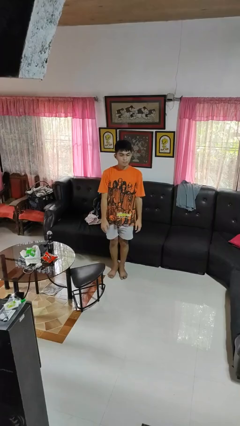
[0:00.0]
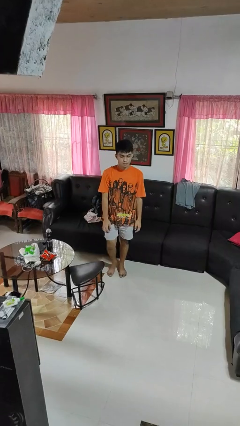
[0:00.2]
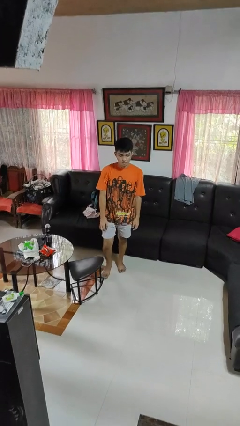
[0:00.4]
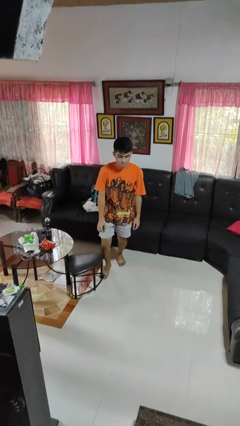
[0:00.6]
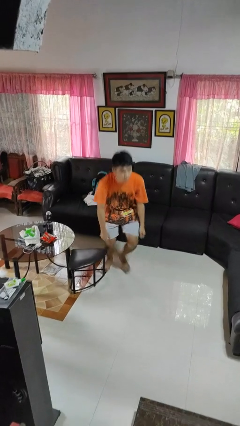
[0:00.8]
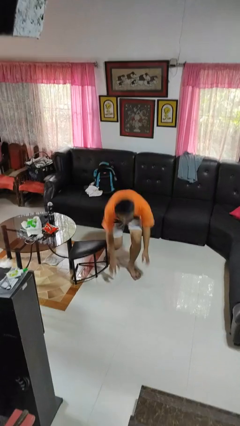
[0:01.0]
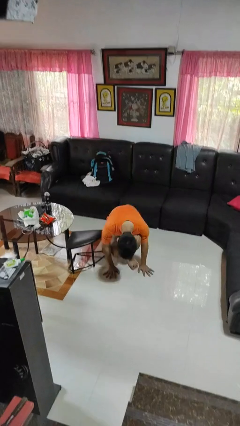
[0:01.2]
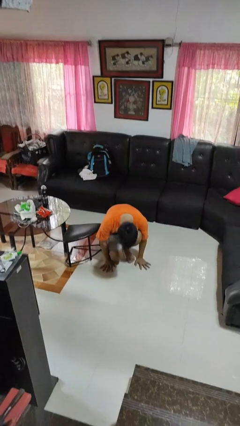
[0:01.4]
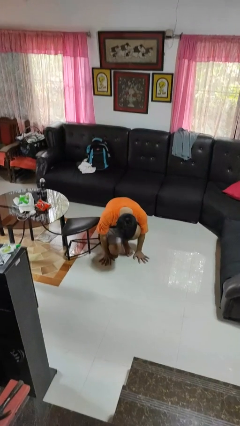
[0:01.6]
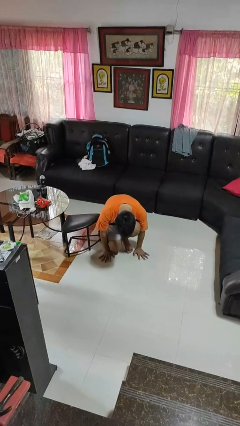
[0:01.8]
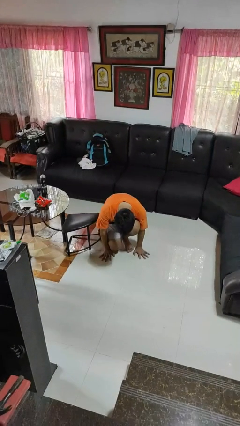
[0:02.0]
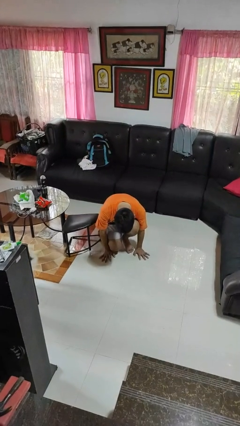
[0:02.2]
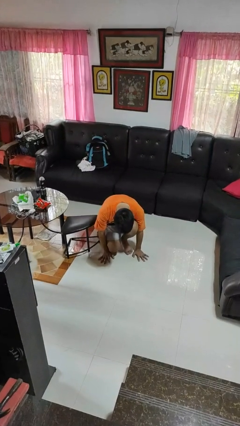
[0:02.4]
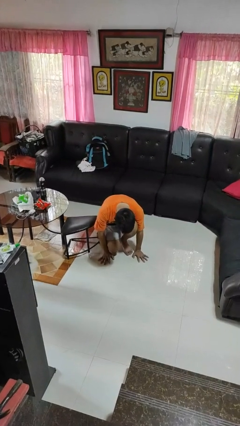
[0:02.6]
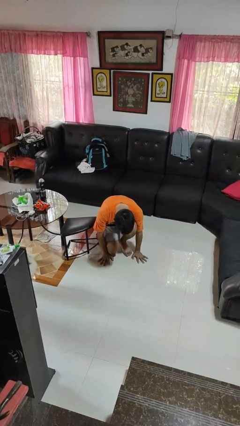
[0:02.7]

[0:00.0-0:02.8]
person trips on object on floor

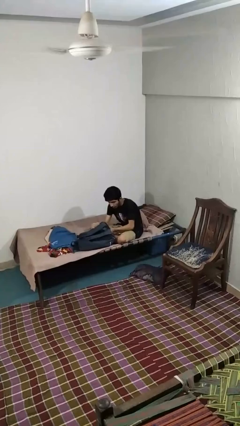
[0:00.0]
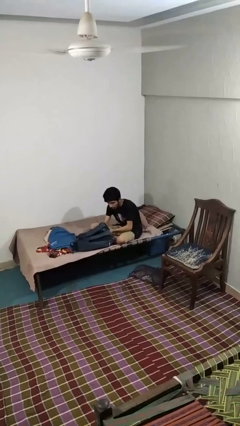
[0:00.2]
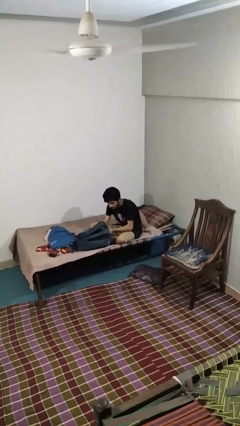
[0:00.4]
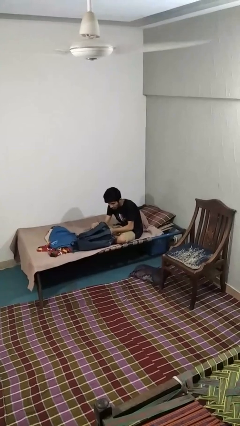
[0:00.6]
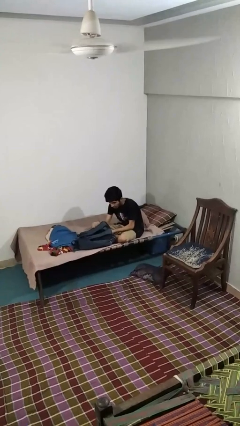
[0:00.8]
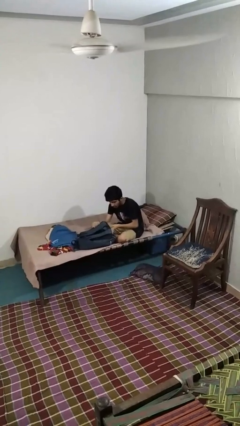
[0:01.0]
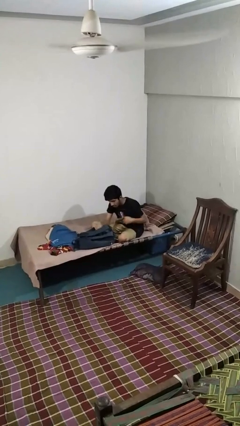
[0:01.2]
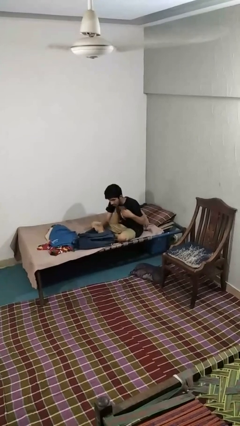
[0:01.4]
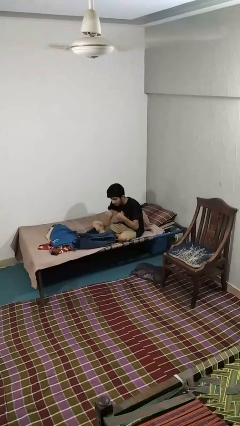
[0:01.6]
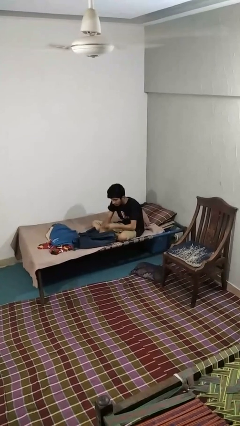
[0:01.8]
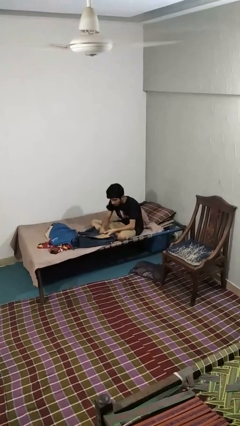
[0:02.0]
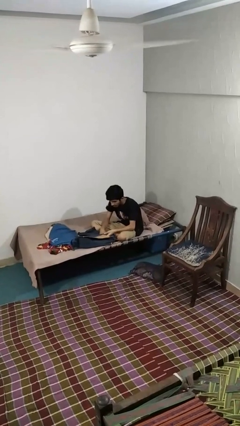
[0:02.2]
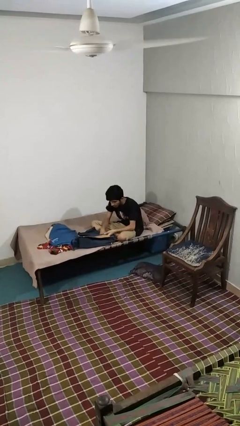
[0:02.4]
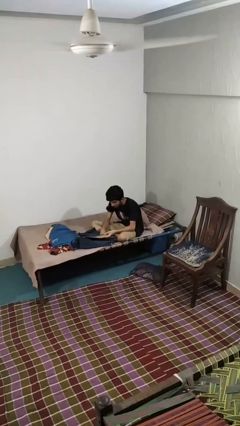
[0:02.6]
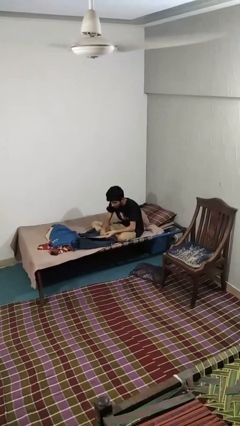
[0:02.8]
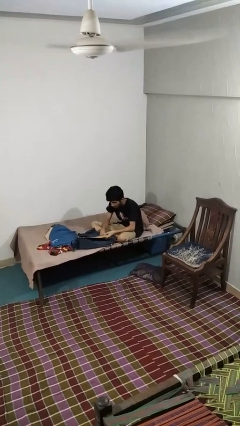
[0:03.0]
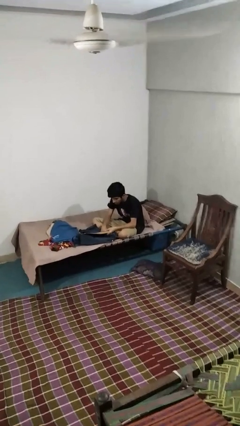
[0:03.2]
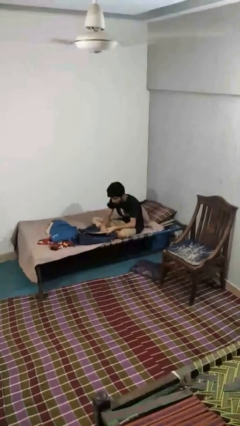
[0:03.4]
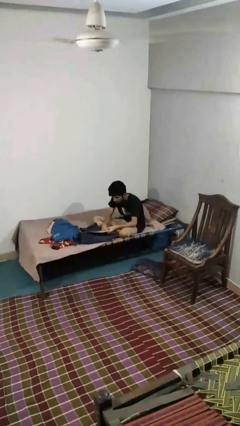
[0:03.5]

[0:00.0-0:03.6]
person takes object from backpack

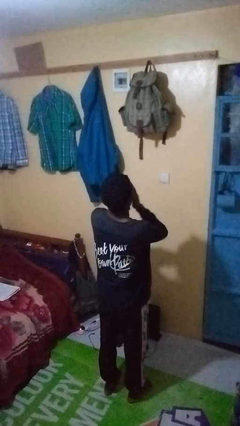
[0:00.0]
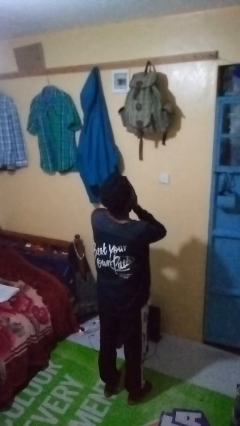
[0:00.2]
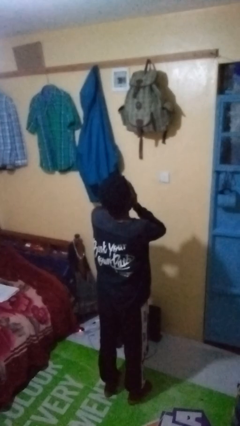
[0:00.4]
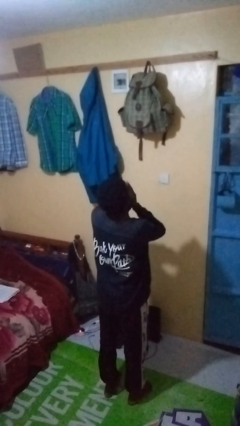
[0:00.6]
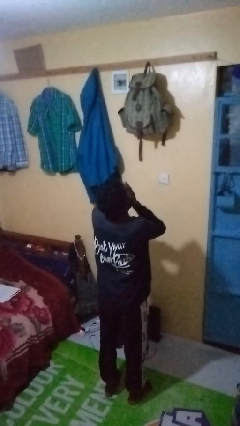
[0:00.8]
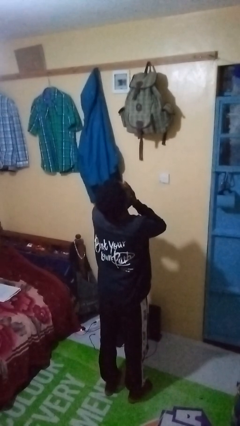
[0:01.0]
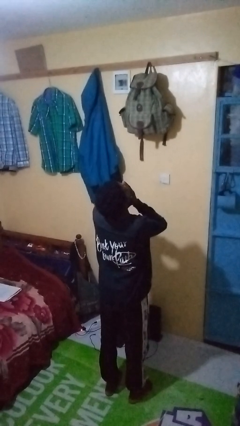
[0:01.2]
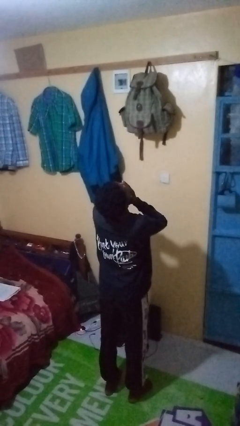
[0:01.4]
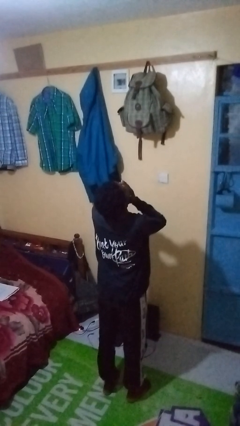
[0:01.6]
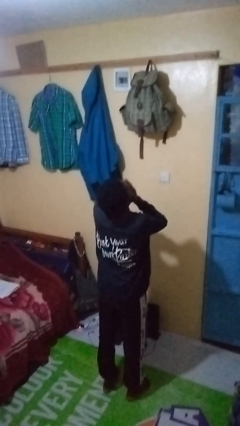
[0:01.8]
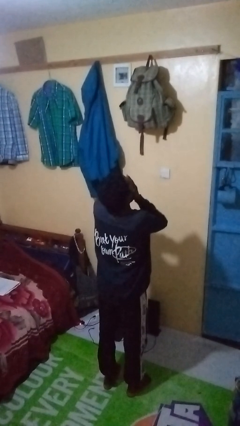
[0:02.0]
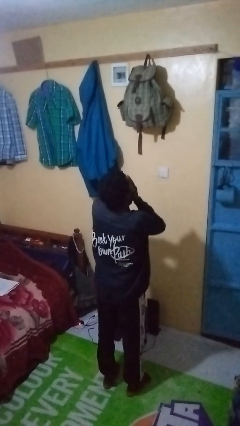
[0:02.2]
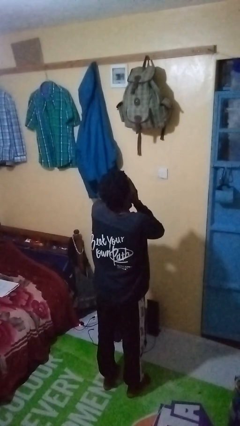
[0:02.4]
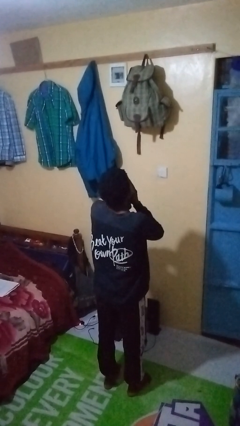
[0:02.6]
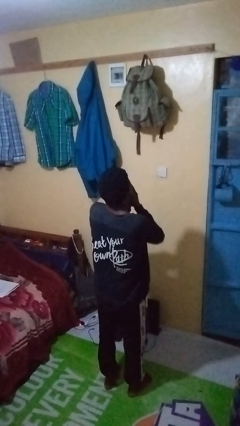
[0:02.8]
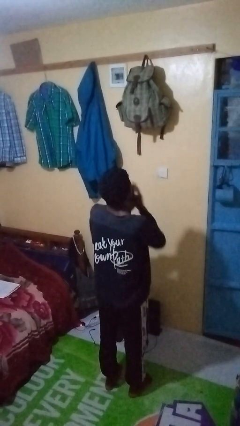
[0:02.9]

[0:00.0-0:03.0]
person yawns

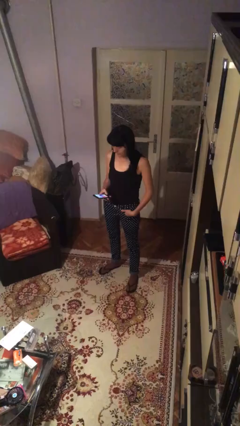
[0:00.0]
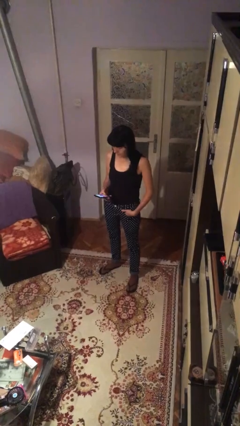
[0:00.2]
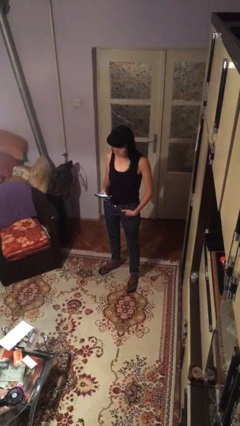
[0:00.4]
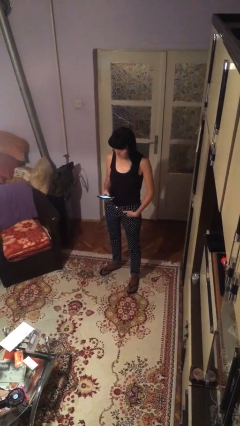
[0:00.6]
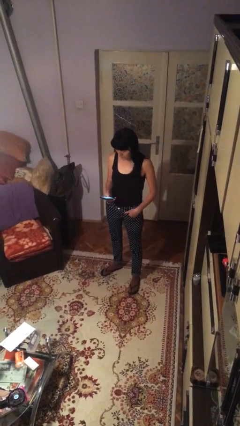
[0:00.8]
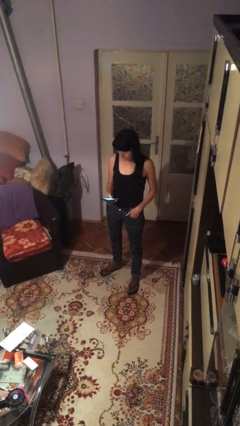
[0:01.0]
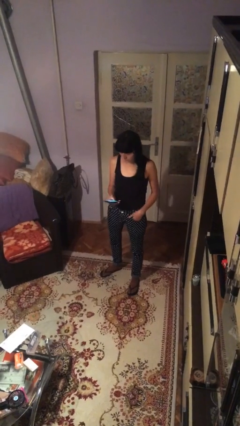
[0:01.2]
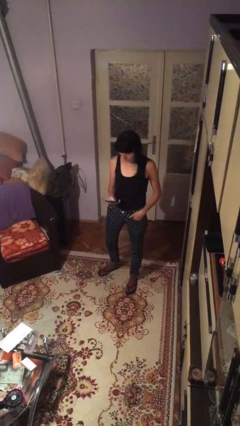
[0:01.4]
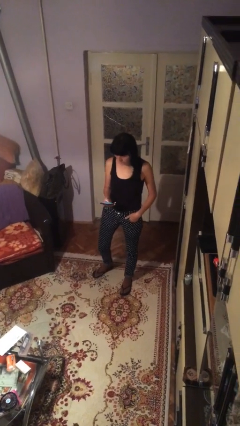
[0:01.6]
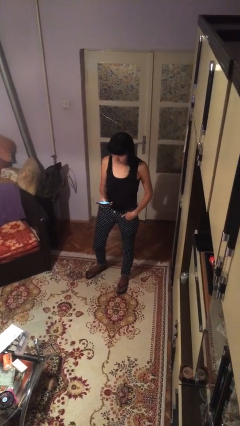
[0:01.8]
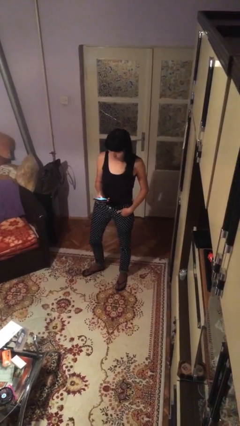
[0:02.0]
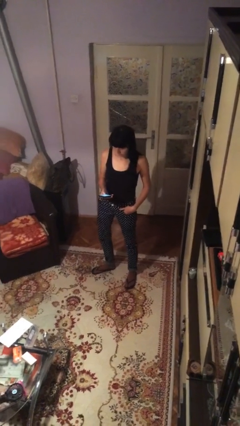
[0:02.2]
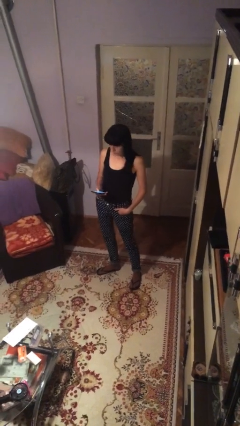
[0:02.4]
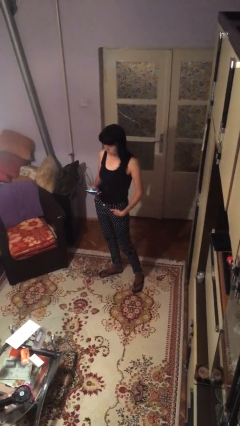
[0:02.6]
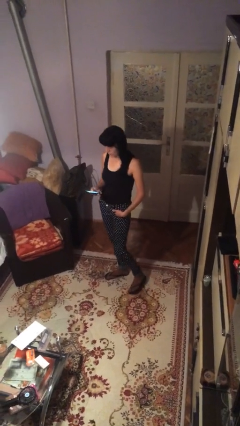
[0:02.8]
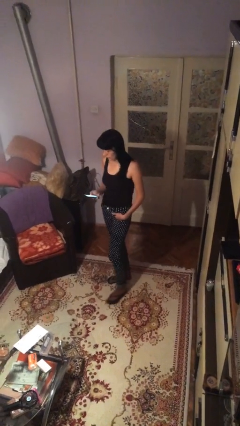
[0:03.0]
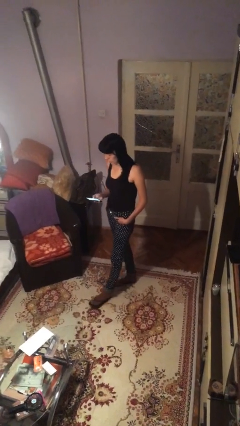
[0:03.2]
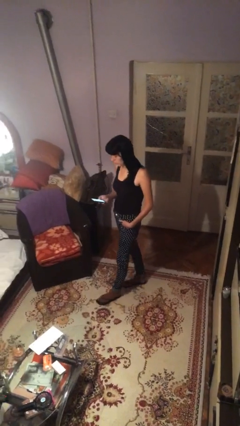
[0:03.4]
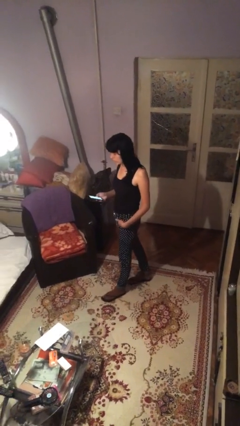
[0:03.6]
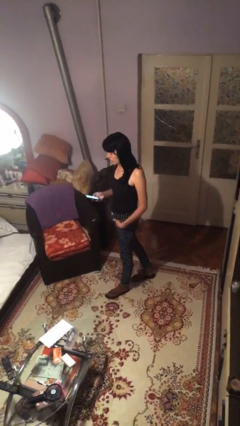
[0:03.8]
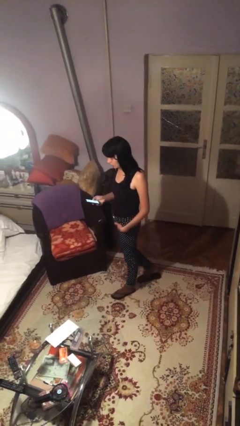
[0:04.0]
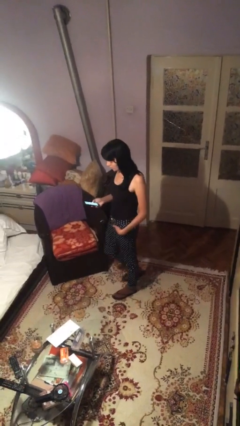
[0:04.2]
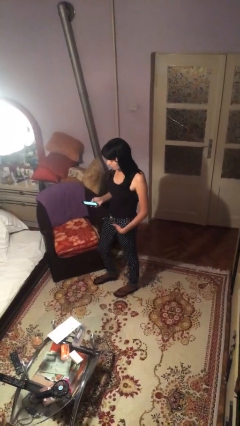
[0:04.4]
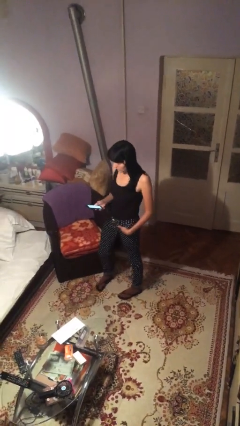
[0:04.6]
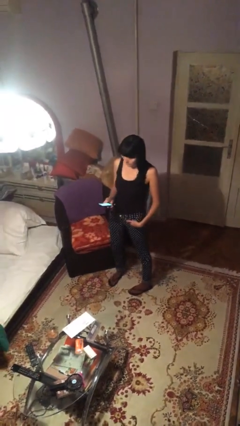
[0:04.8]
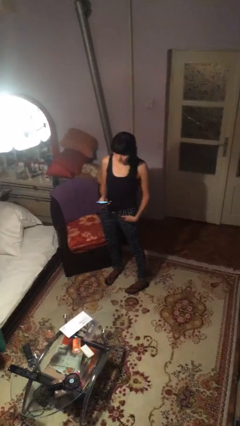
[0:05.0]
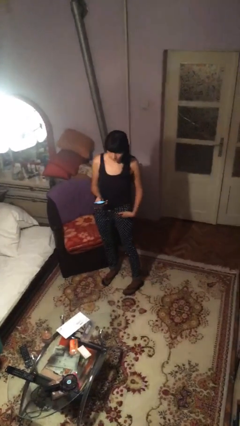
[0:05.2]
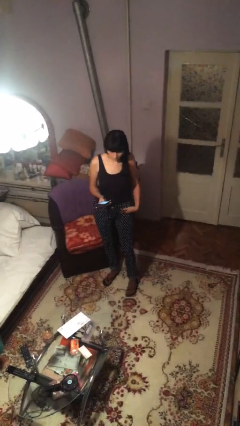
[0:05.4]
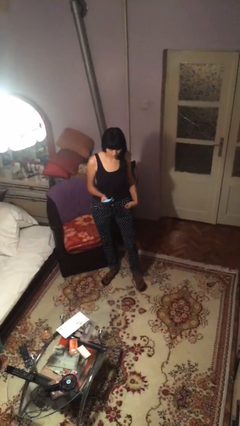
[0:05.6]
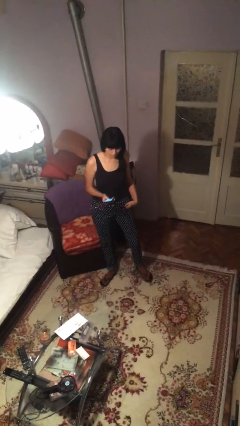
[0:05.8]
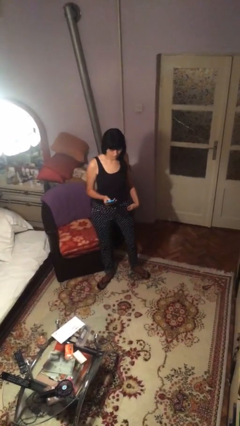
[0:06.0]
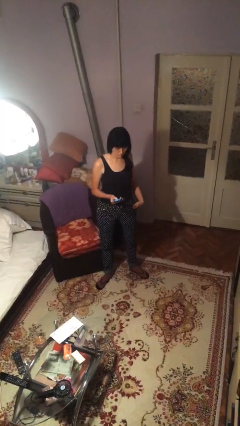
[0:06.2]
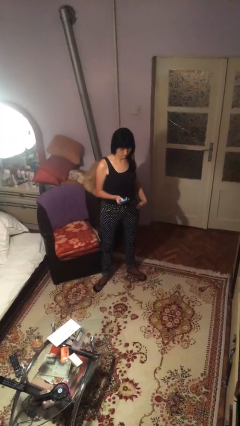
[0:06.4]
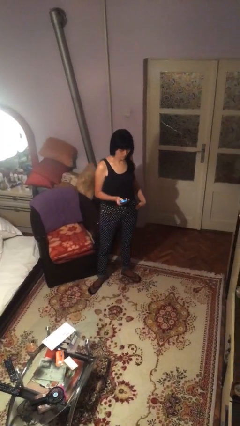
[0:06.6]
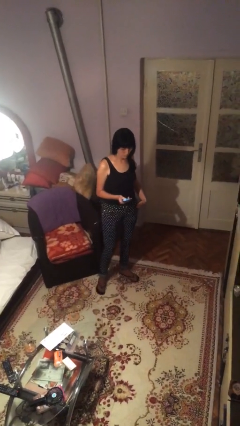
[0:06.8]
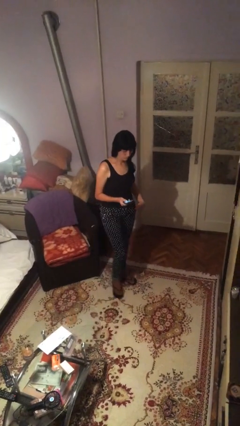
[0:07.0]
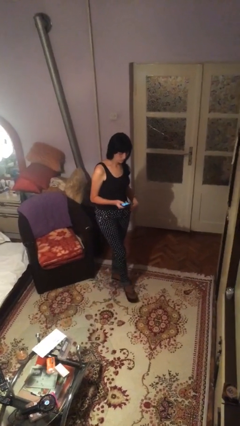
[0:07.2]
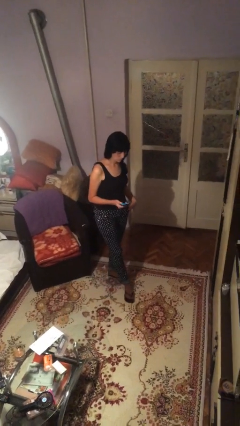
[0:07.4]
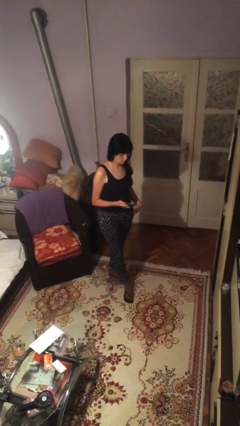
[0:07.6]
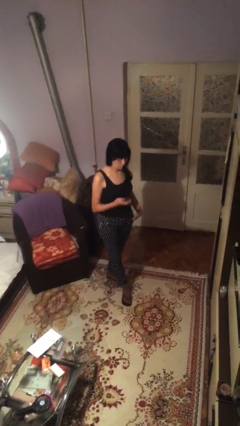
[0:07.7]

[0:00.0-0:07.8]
person texts on phone

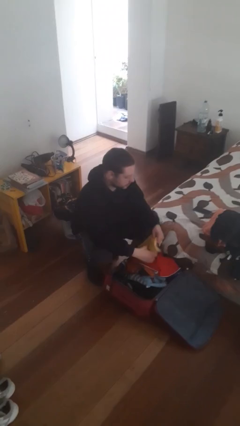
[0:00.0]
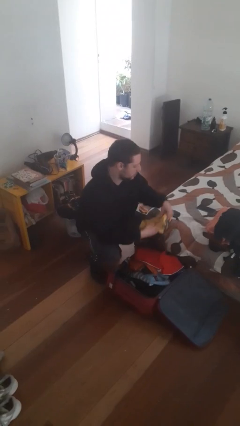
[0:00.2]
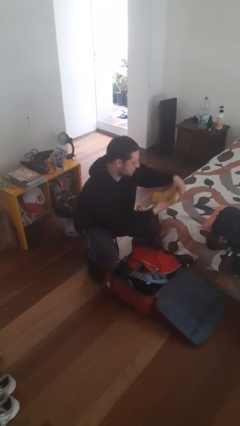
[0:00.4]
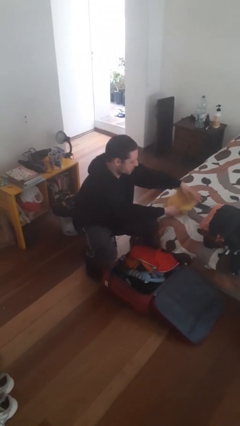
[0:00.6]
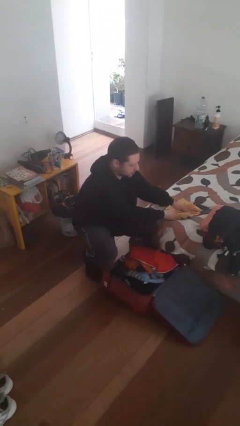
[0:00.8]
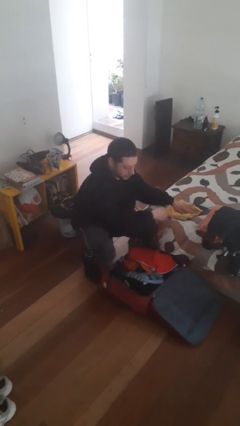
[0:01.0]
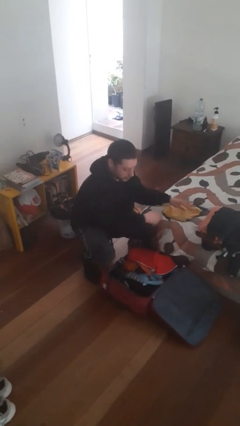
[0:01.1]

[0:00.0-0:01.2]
person unloads clothes from suitcase
